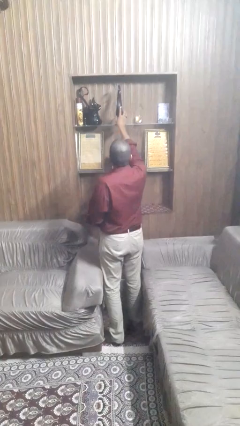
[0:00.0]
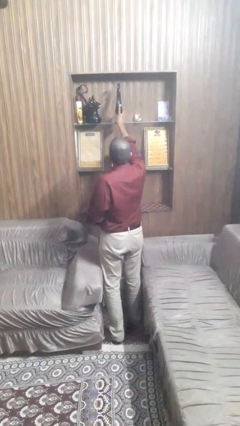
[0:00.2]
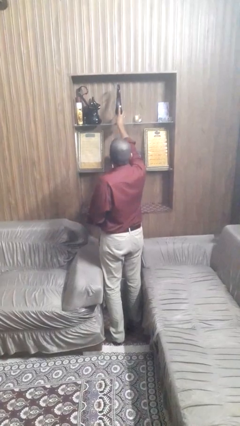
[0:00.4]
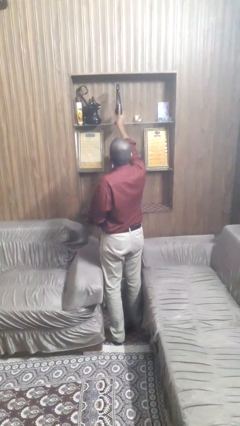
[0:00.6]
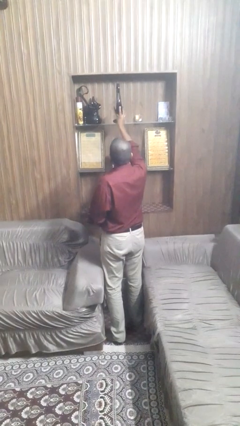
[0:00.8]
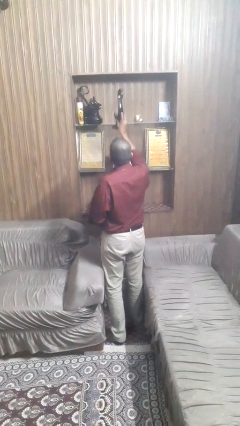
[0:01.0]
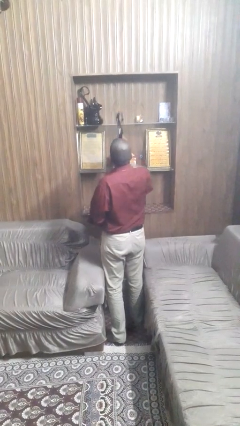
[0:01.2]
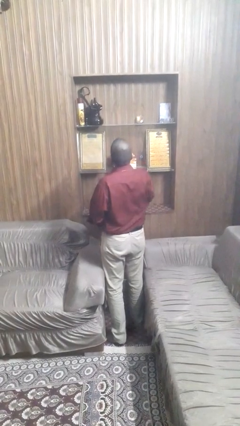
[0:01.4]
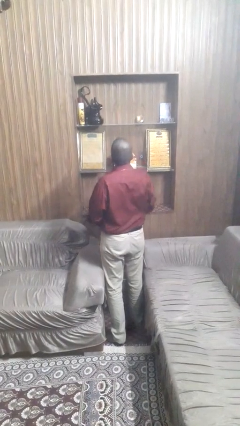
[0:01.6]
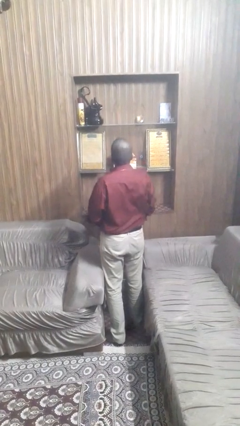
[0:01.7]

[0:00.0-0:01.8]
person picks up object from shelf

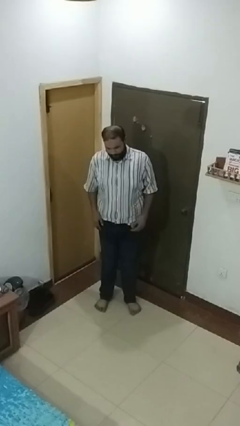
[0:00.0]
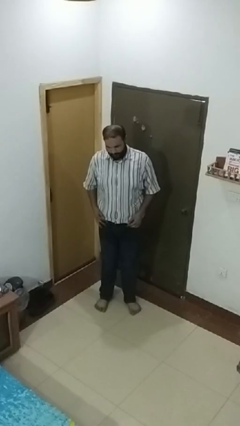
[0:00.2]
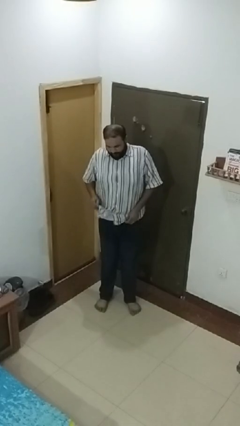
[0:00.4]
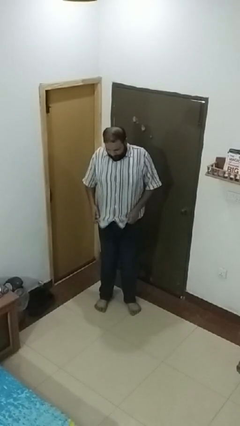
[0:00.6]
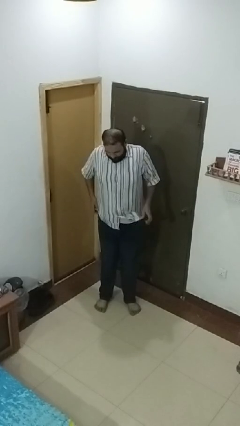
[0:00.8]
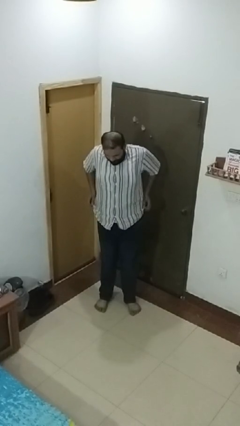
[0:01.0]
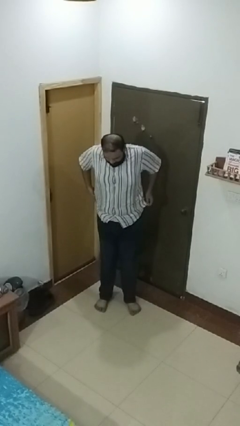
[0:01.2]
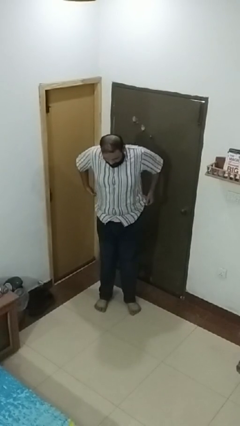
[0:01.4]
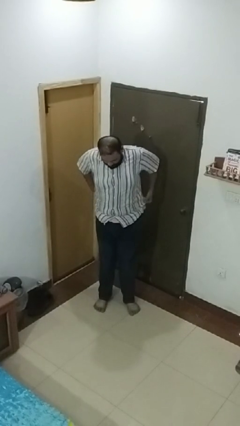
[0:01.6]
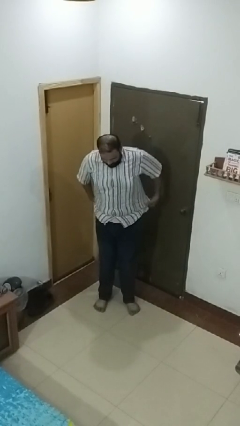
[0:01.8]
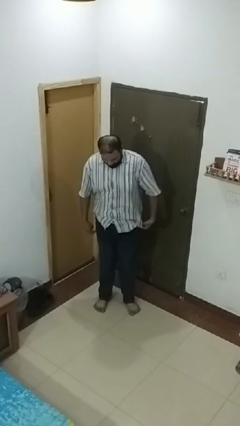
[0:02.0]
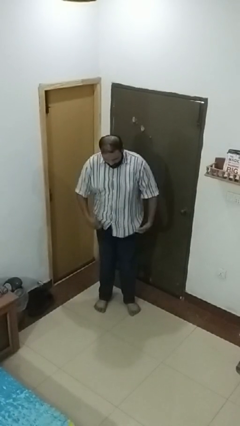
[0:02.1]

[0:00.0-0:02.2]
person untucks shirt

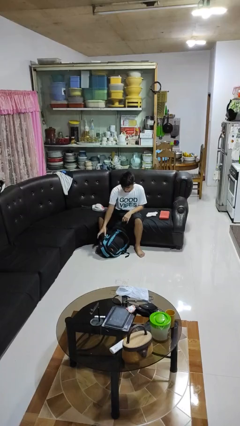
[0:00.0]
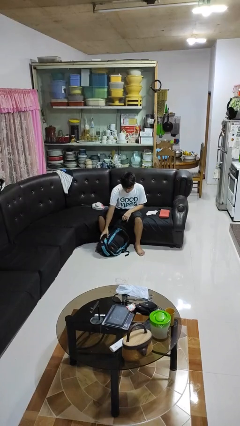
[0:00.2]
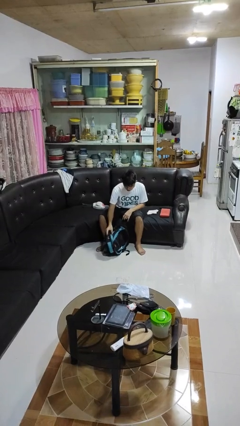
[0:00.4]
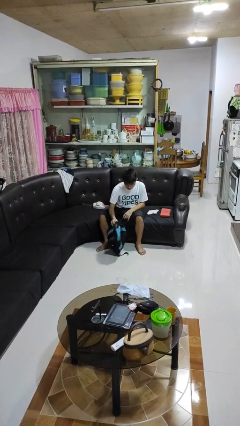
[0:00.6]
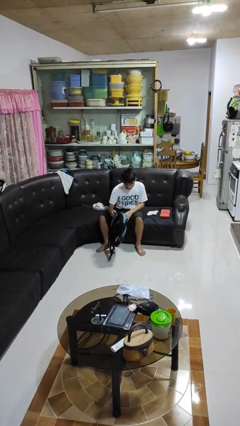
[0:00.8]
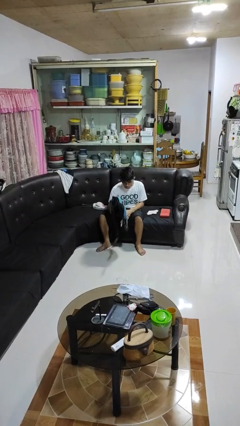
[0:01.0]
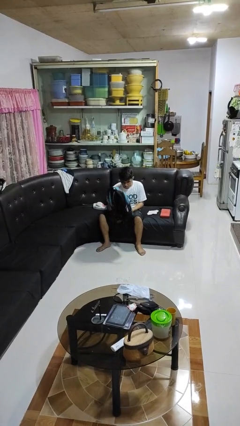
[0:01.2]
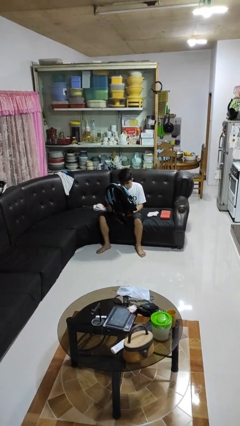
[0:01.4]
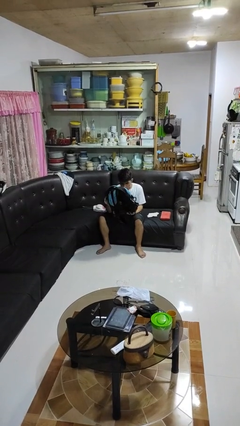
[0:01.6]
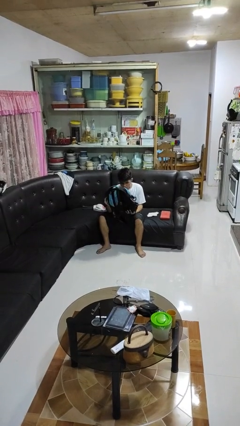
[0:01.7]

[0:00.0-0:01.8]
person picks up object from floor

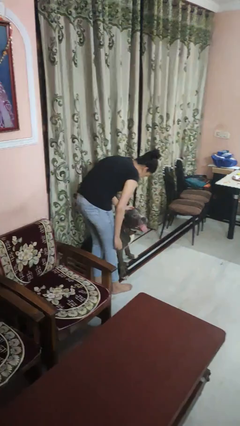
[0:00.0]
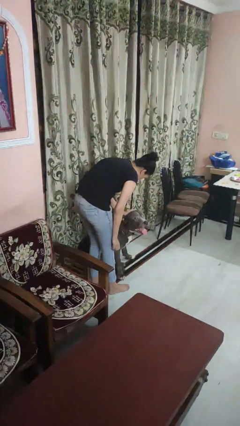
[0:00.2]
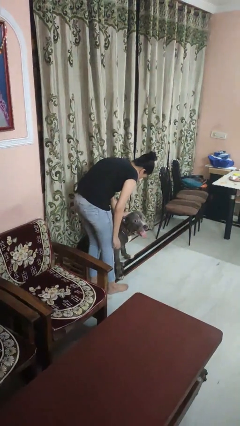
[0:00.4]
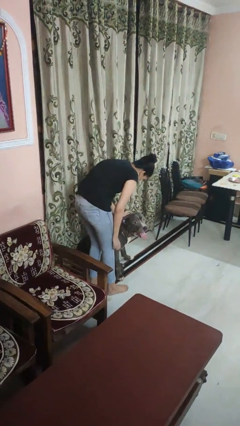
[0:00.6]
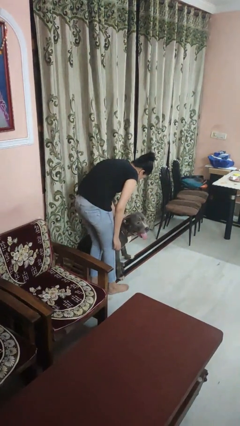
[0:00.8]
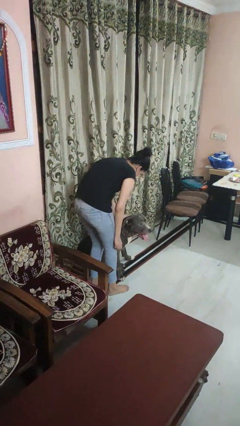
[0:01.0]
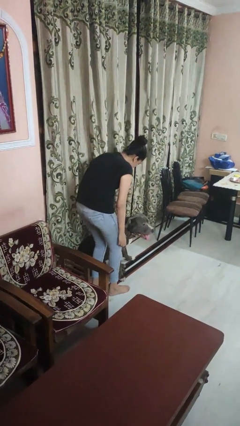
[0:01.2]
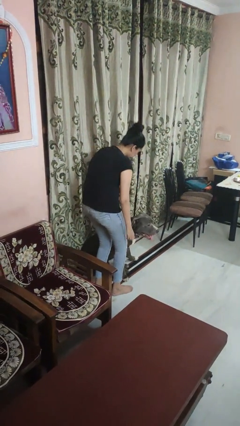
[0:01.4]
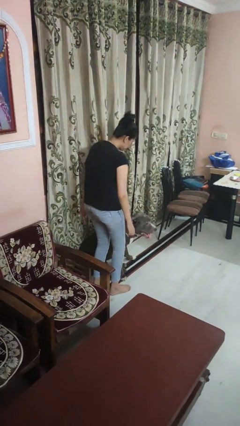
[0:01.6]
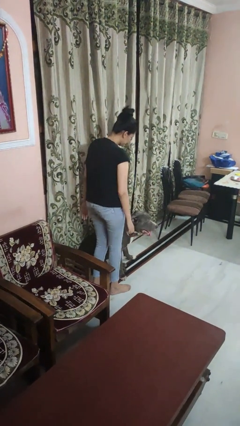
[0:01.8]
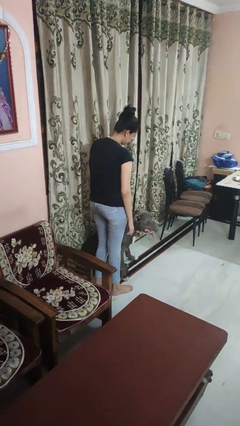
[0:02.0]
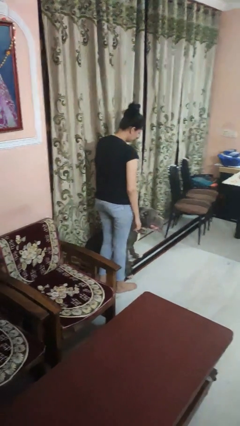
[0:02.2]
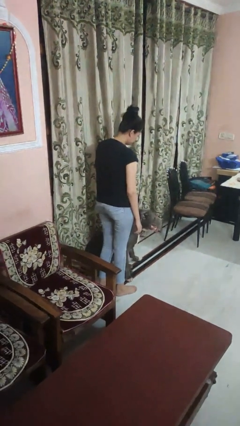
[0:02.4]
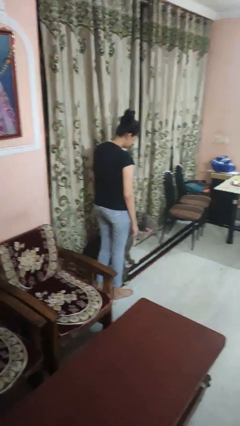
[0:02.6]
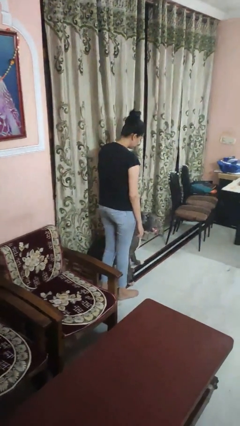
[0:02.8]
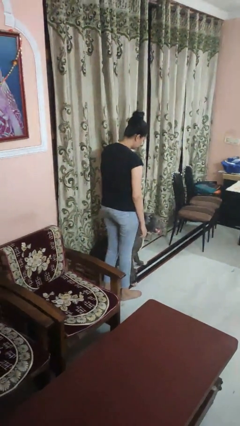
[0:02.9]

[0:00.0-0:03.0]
person pets dog

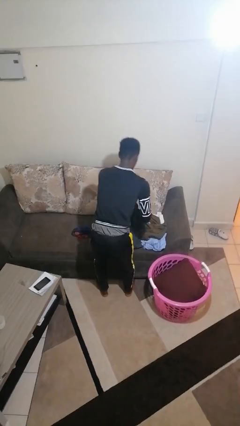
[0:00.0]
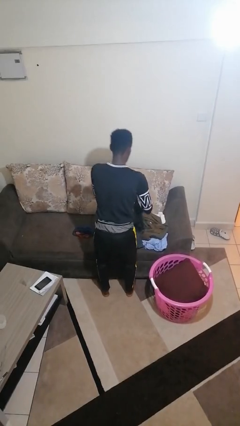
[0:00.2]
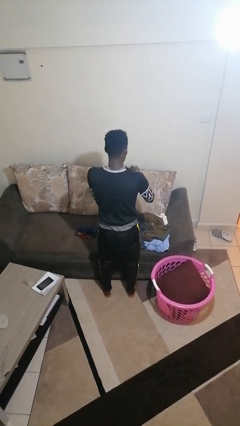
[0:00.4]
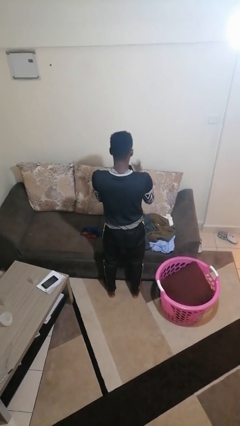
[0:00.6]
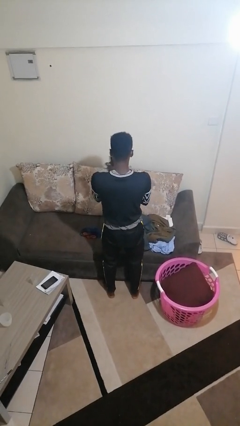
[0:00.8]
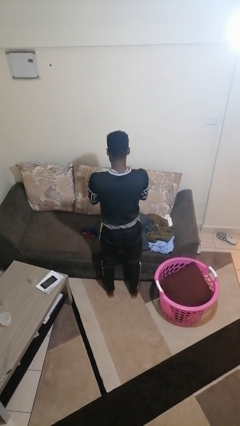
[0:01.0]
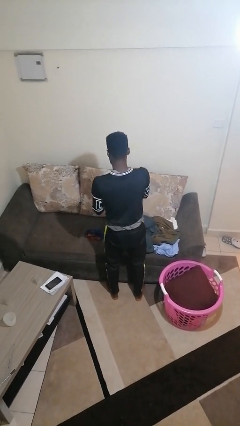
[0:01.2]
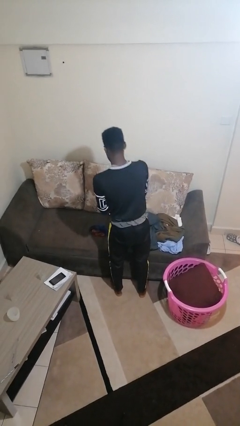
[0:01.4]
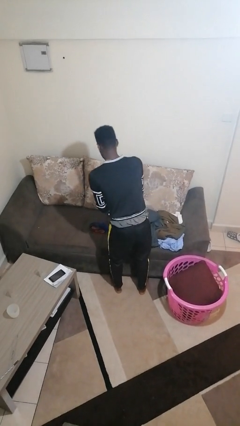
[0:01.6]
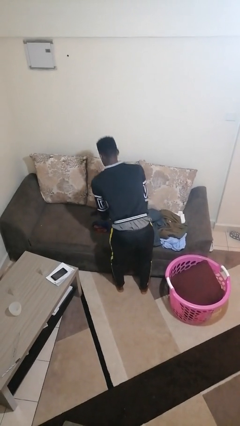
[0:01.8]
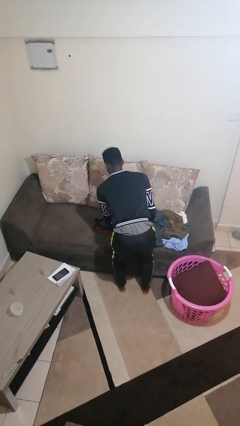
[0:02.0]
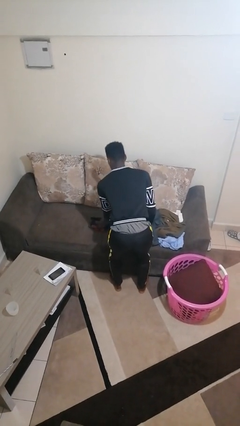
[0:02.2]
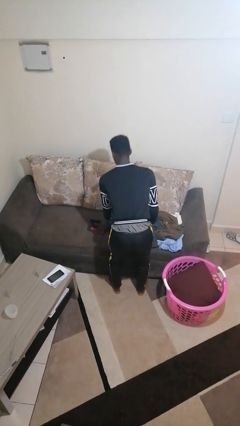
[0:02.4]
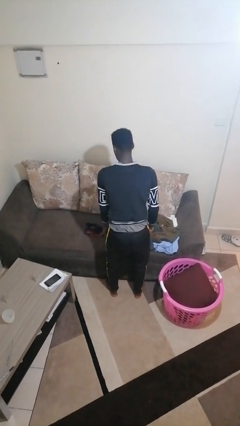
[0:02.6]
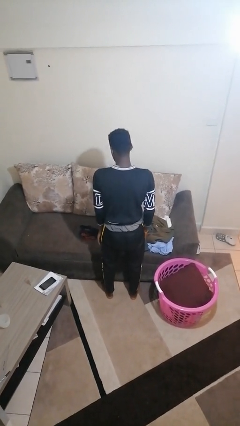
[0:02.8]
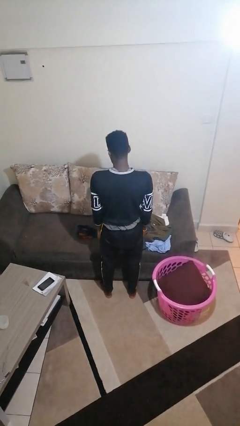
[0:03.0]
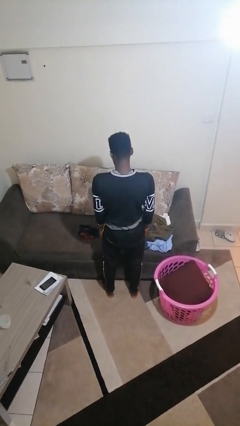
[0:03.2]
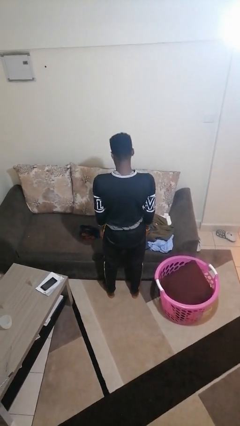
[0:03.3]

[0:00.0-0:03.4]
person folds socks

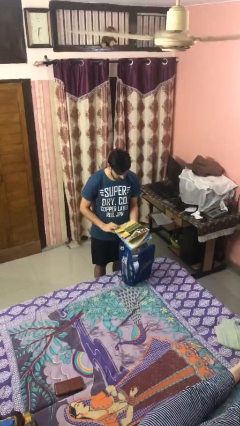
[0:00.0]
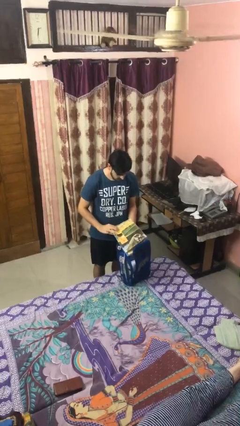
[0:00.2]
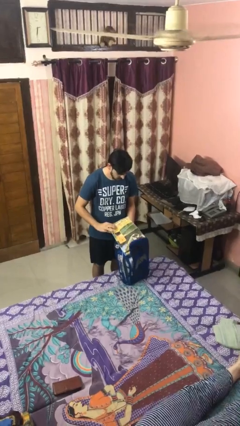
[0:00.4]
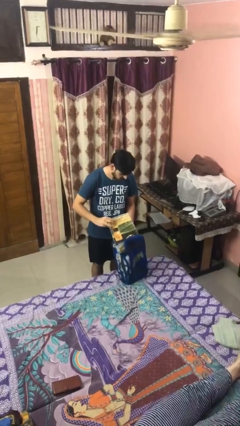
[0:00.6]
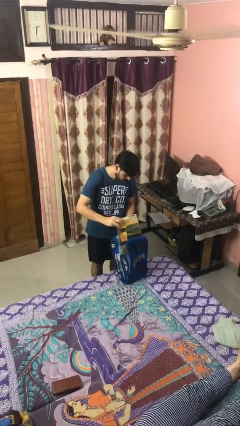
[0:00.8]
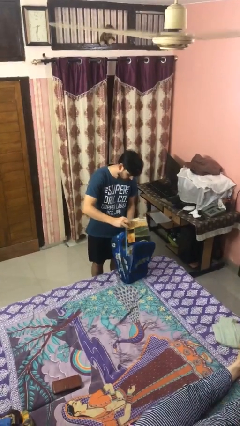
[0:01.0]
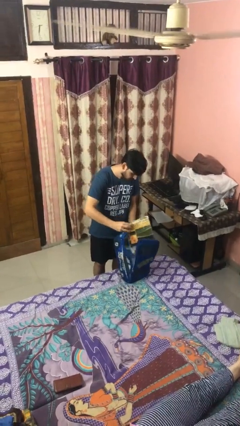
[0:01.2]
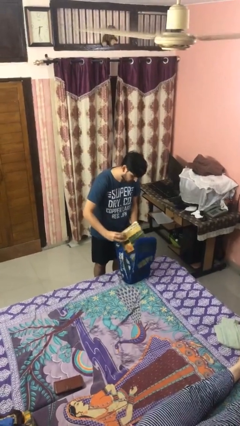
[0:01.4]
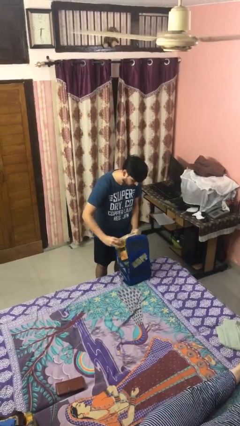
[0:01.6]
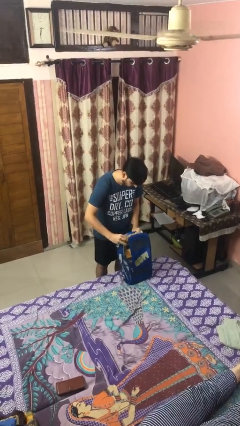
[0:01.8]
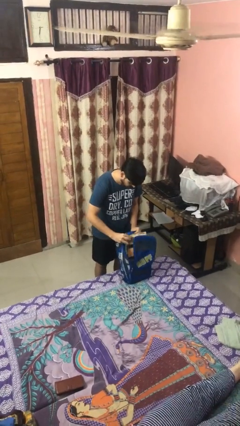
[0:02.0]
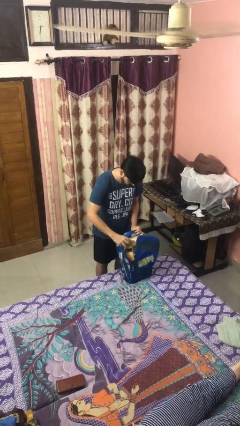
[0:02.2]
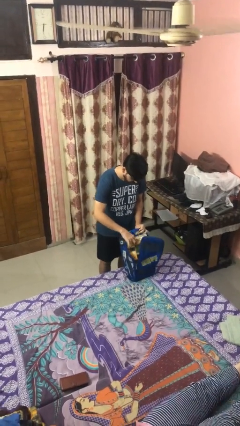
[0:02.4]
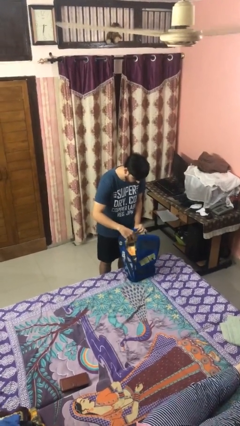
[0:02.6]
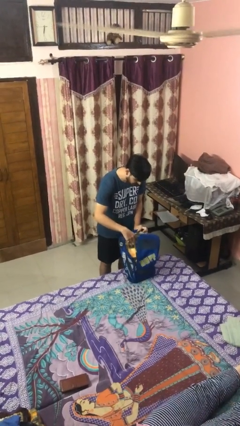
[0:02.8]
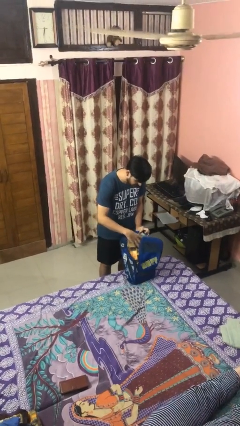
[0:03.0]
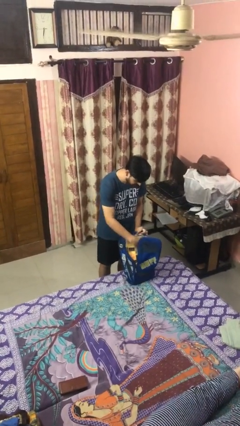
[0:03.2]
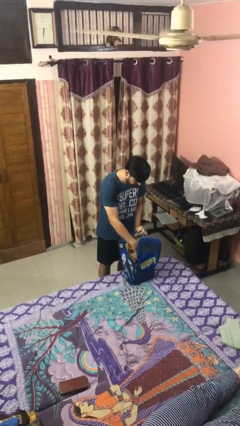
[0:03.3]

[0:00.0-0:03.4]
person puts object into purse

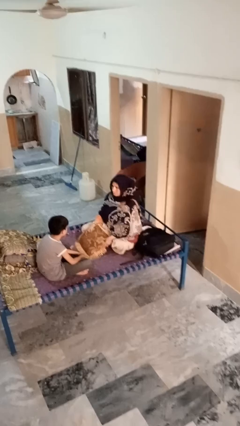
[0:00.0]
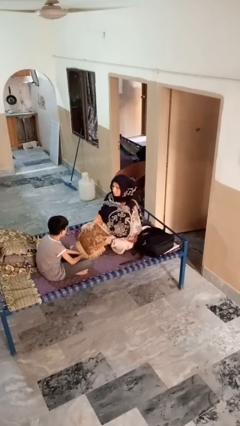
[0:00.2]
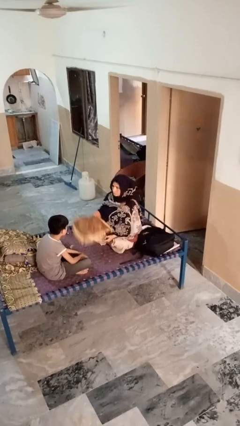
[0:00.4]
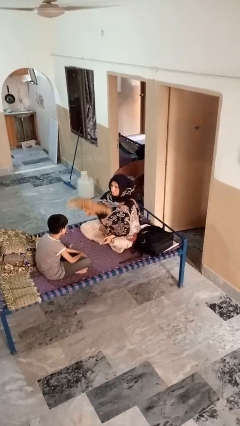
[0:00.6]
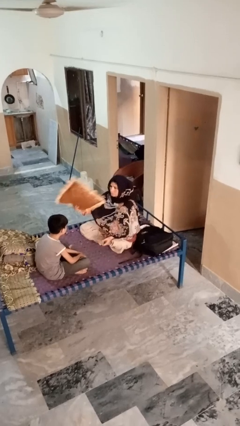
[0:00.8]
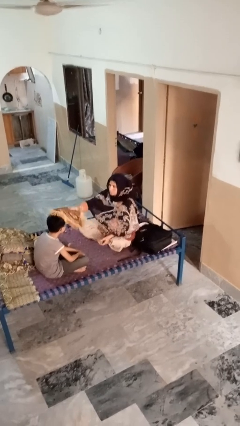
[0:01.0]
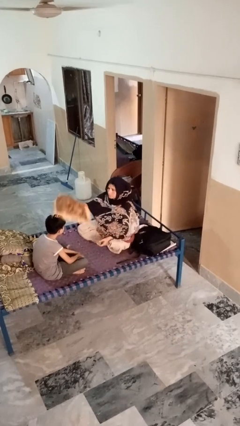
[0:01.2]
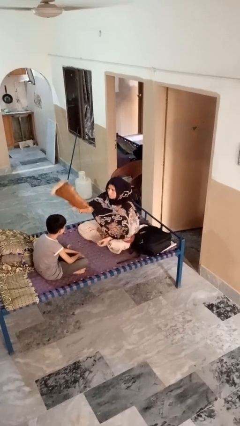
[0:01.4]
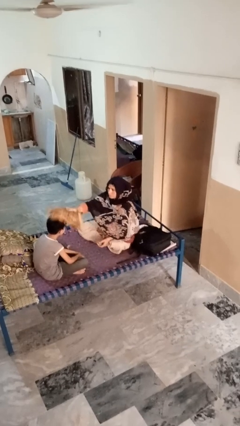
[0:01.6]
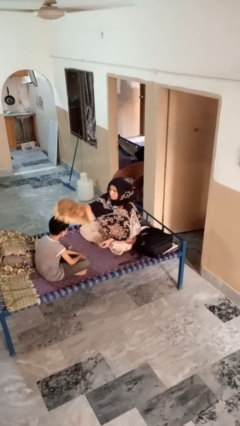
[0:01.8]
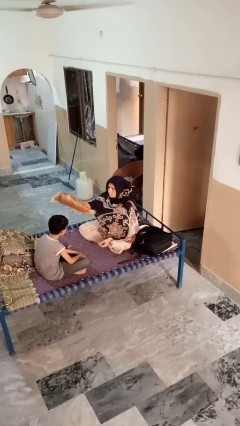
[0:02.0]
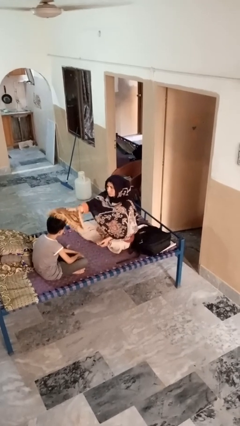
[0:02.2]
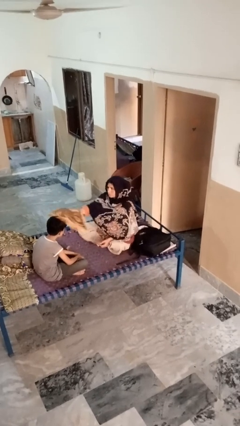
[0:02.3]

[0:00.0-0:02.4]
person hits person with pillow
